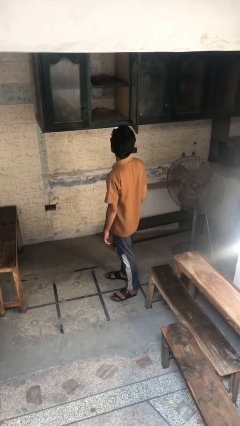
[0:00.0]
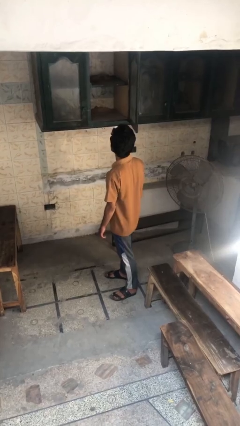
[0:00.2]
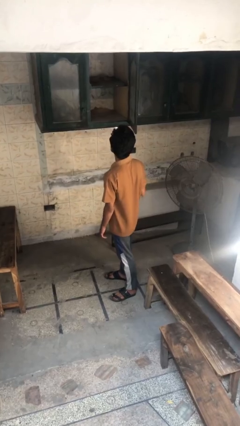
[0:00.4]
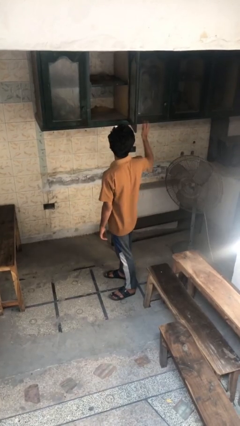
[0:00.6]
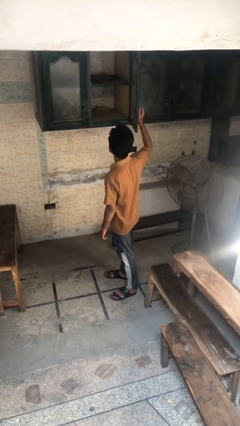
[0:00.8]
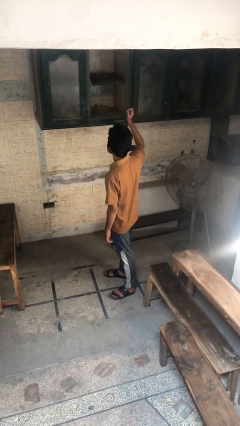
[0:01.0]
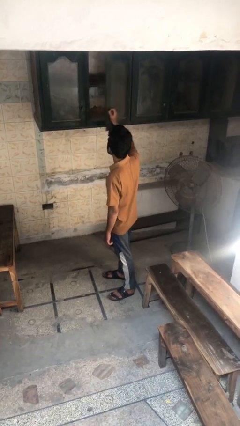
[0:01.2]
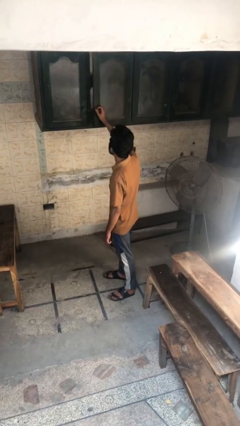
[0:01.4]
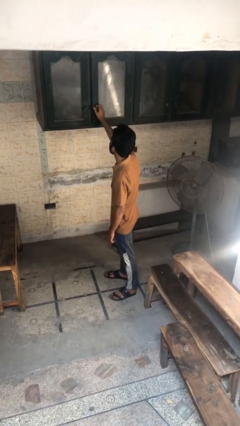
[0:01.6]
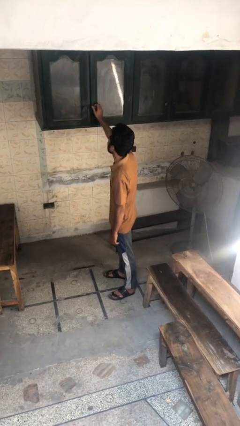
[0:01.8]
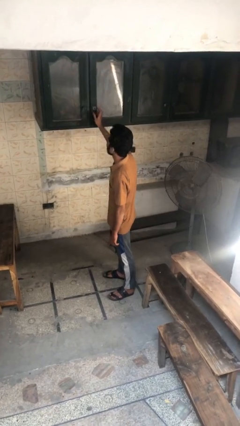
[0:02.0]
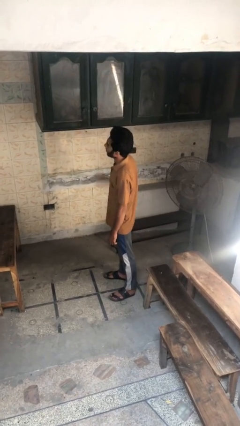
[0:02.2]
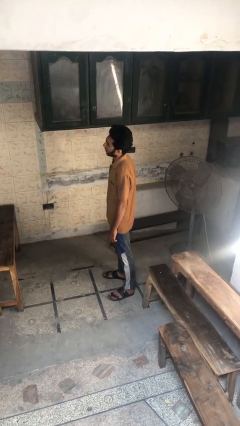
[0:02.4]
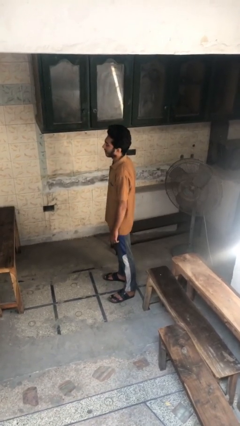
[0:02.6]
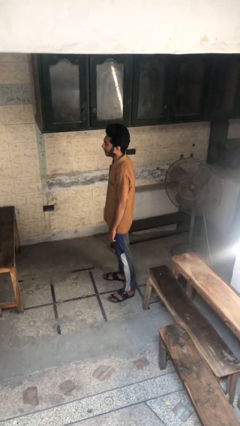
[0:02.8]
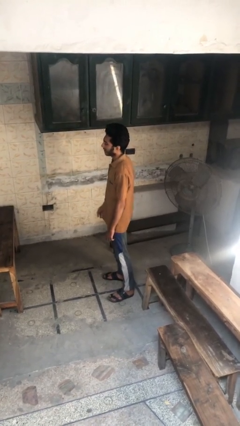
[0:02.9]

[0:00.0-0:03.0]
person closes cabinet

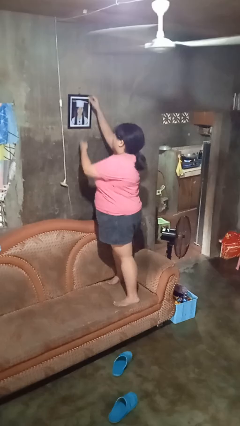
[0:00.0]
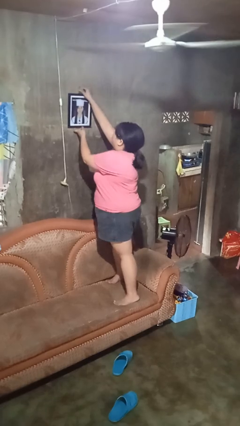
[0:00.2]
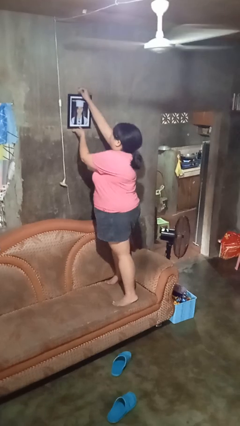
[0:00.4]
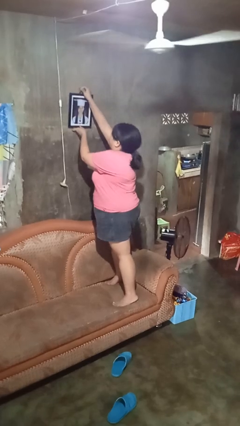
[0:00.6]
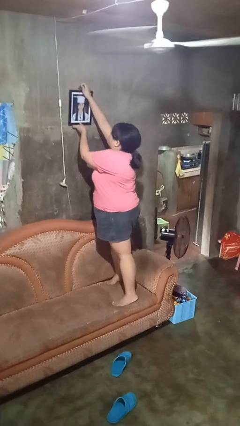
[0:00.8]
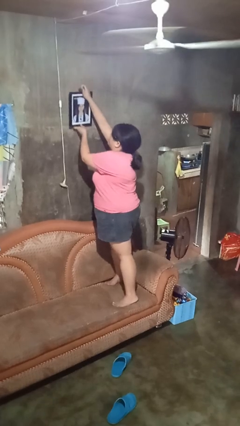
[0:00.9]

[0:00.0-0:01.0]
person takes down picture frame

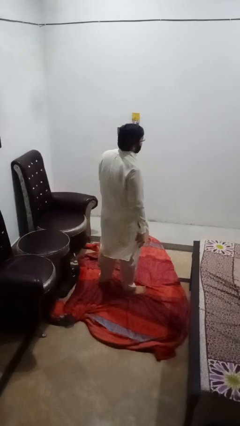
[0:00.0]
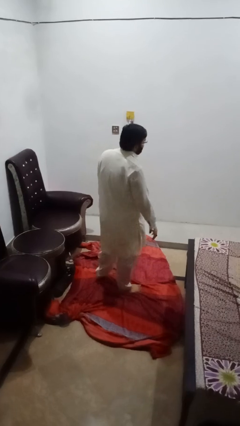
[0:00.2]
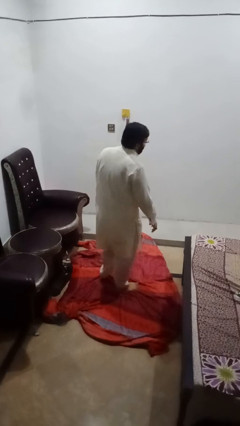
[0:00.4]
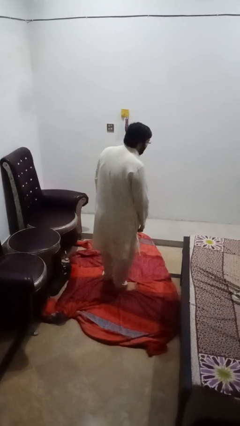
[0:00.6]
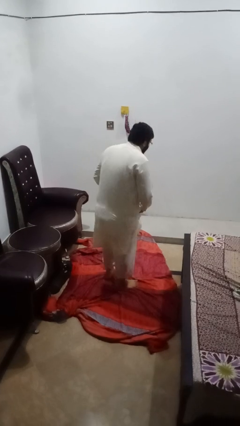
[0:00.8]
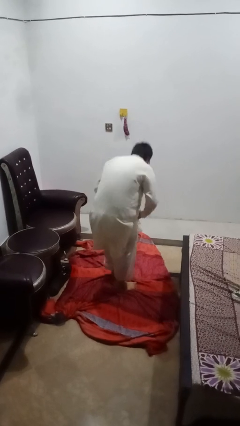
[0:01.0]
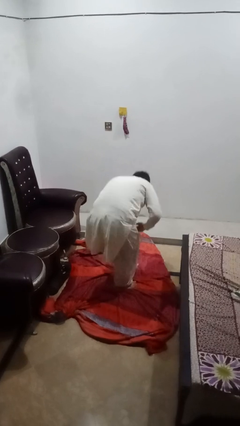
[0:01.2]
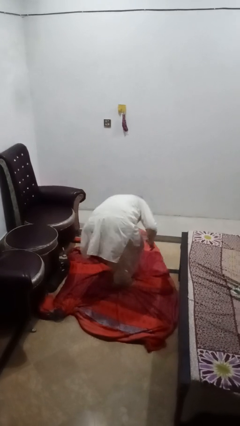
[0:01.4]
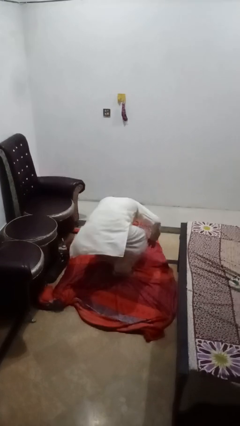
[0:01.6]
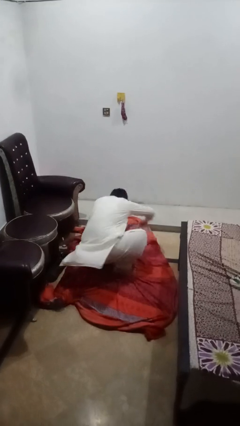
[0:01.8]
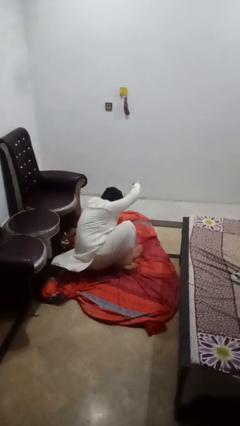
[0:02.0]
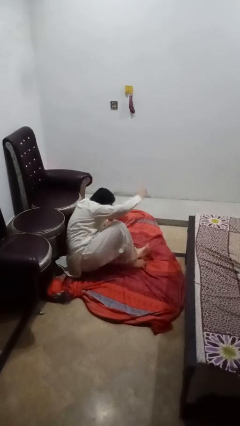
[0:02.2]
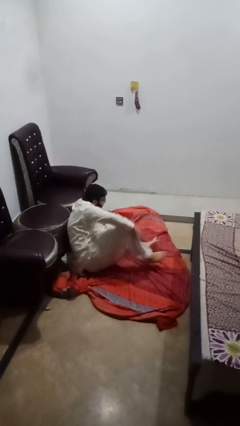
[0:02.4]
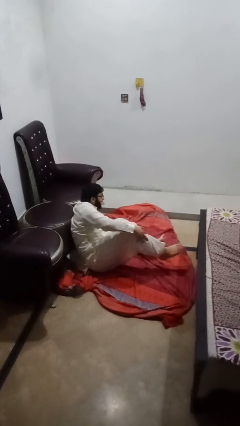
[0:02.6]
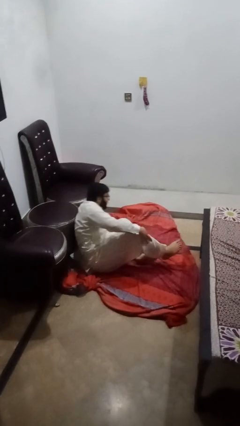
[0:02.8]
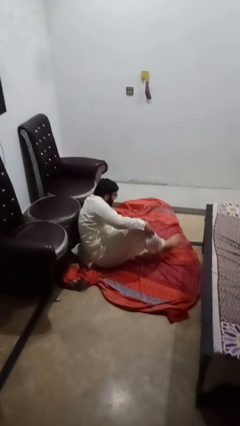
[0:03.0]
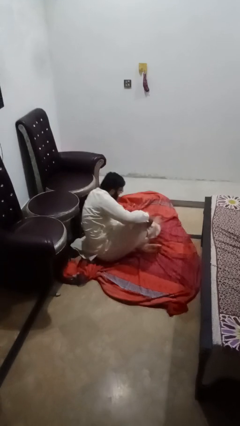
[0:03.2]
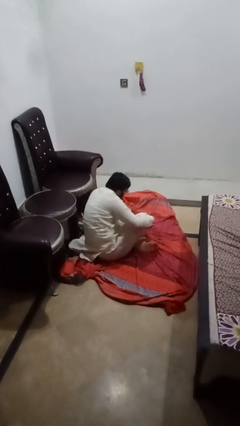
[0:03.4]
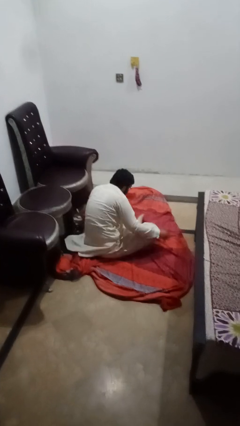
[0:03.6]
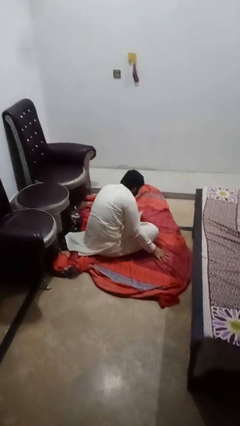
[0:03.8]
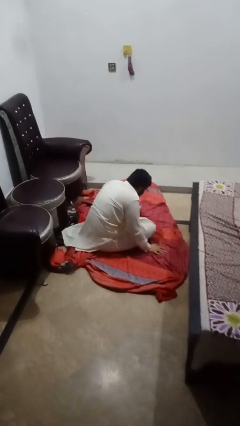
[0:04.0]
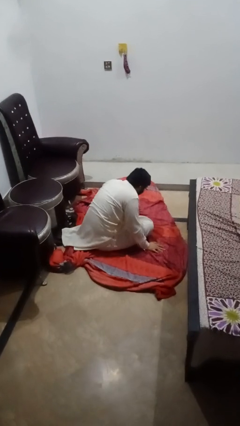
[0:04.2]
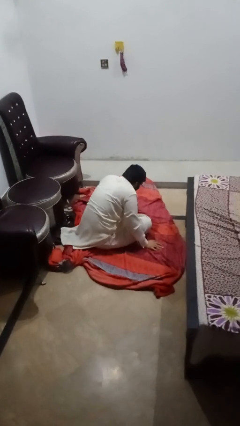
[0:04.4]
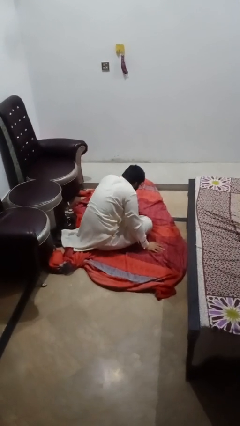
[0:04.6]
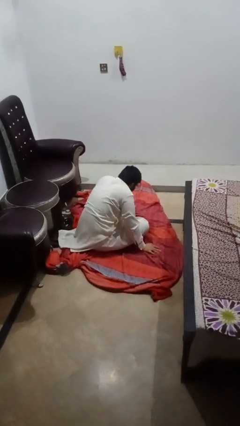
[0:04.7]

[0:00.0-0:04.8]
person sits crisscross

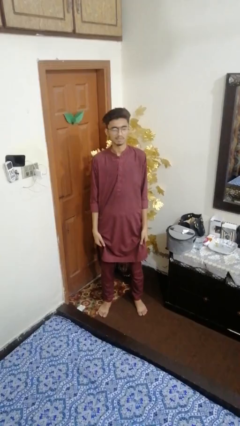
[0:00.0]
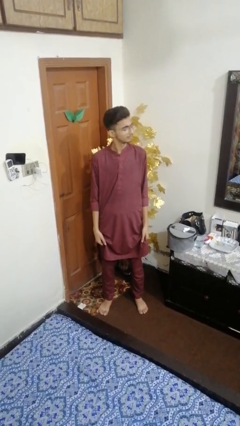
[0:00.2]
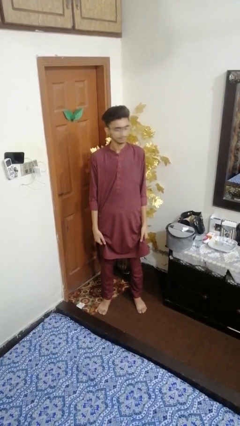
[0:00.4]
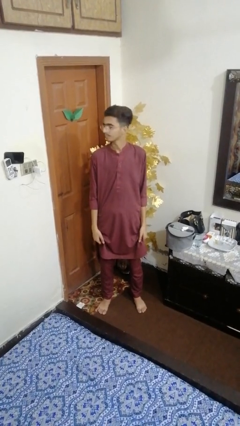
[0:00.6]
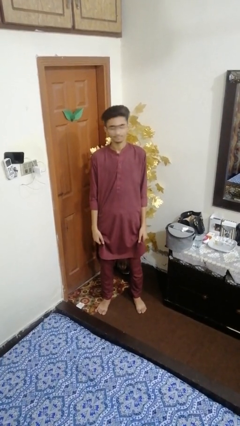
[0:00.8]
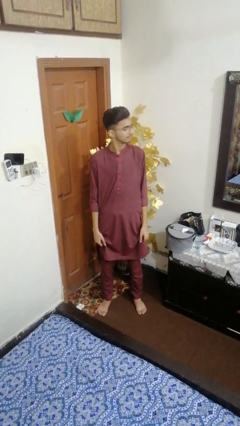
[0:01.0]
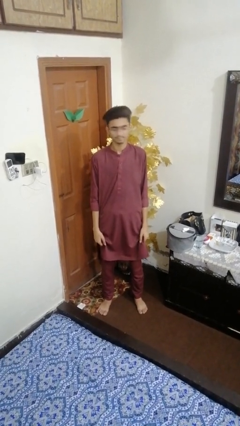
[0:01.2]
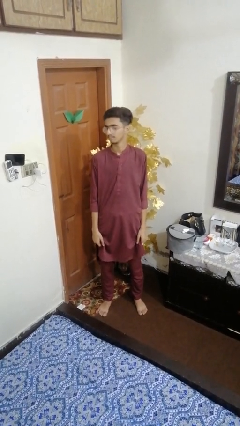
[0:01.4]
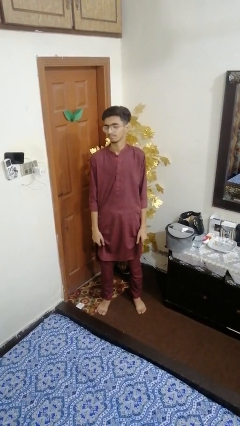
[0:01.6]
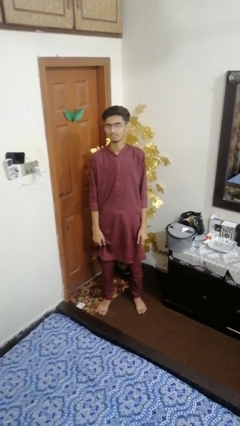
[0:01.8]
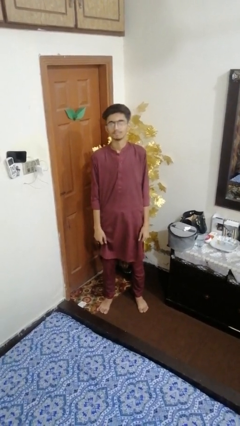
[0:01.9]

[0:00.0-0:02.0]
person shakes head

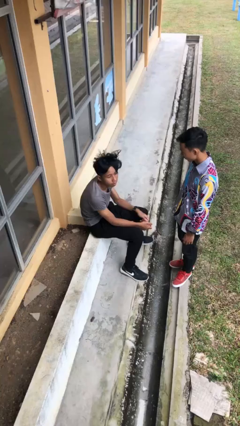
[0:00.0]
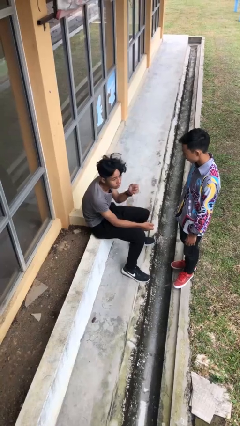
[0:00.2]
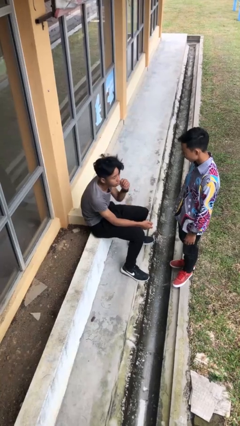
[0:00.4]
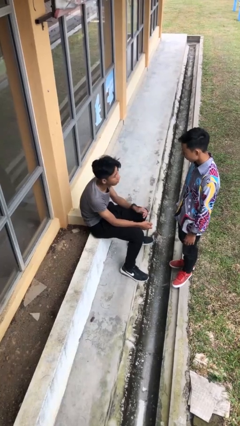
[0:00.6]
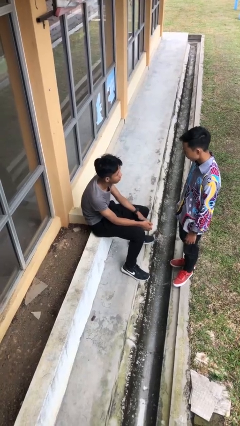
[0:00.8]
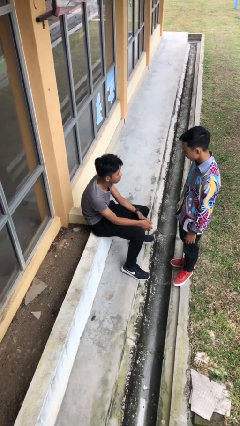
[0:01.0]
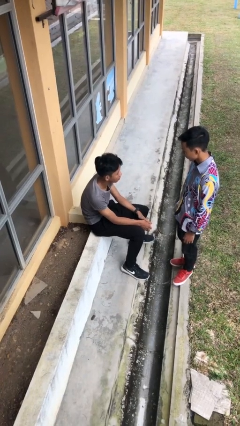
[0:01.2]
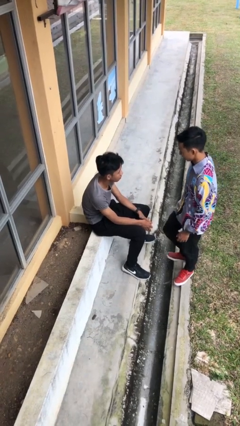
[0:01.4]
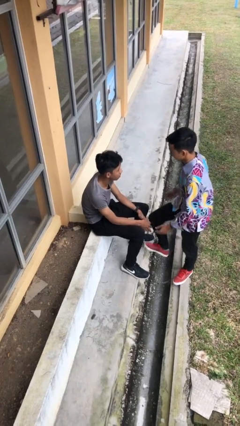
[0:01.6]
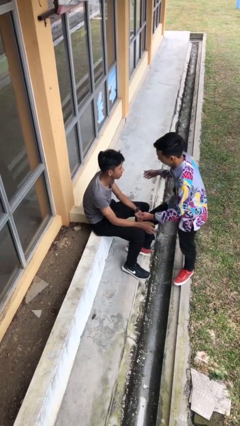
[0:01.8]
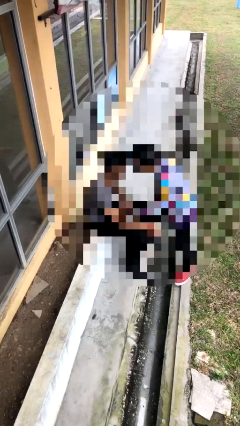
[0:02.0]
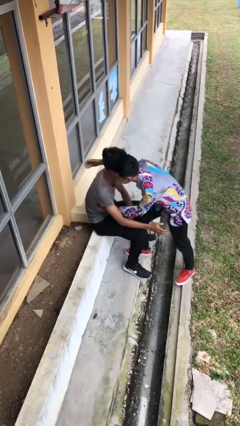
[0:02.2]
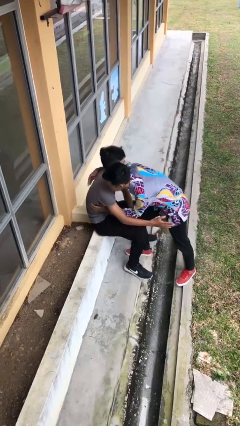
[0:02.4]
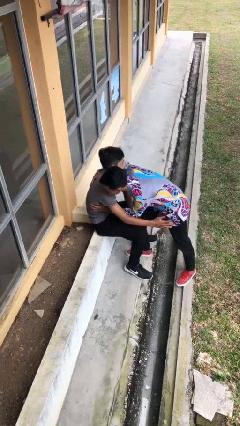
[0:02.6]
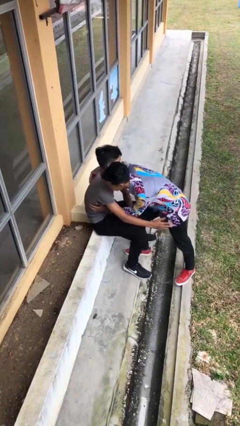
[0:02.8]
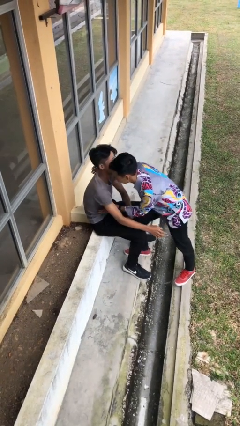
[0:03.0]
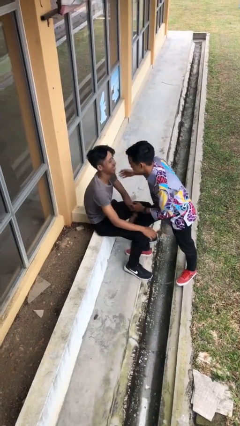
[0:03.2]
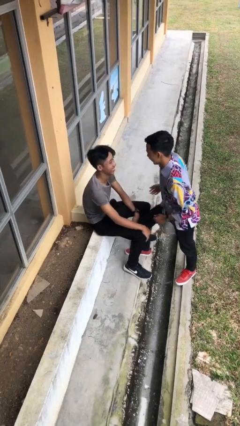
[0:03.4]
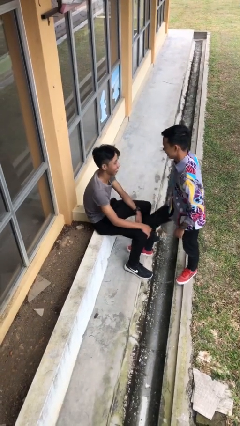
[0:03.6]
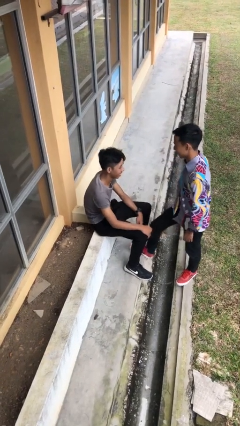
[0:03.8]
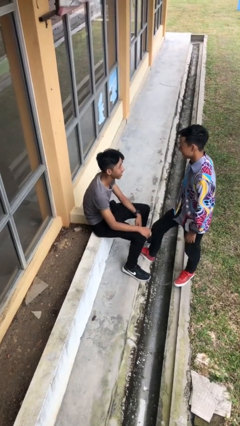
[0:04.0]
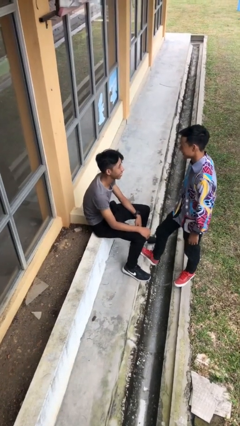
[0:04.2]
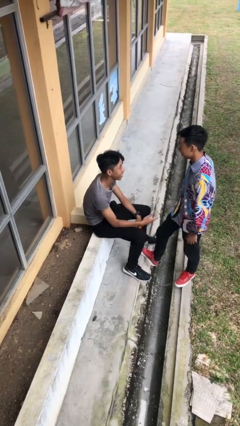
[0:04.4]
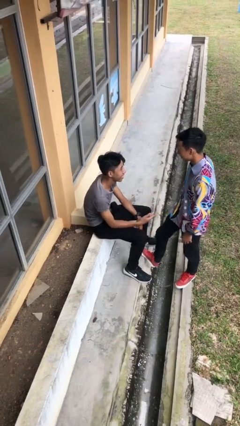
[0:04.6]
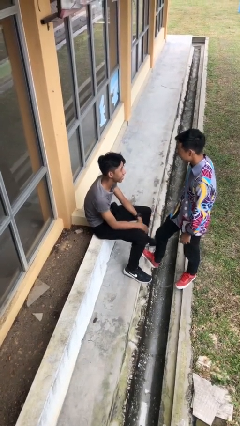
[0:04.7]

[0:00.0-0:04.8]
person embraces person

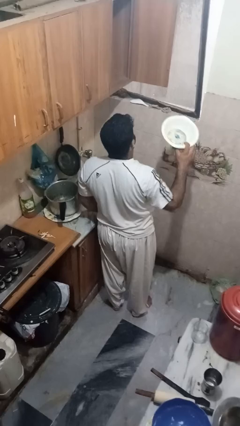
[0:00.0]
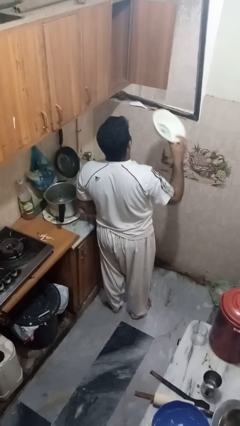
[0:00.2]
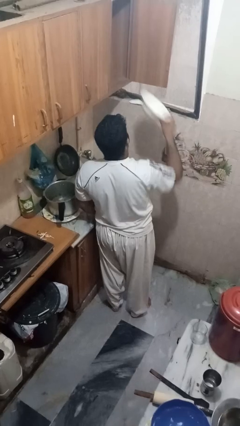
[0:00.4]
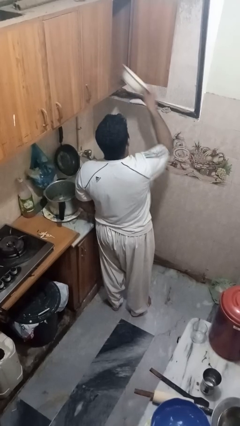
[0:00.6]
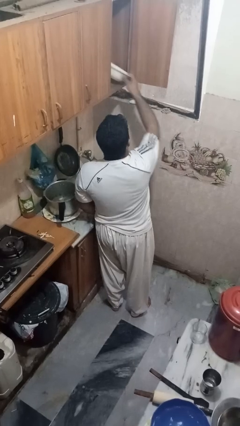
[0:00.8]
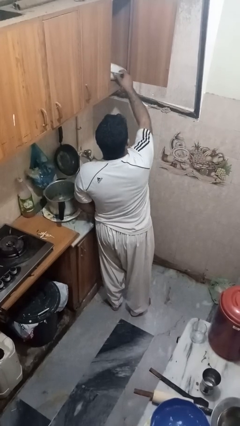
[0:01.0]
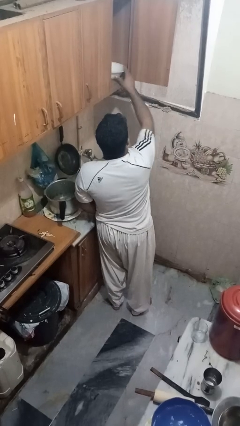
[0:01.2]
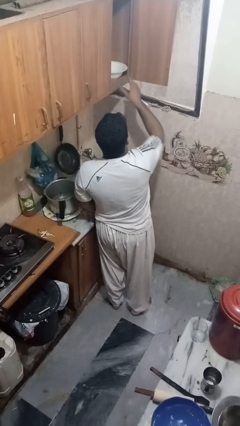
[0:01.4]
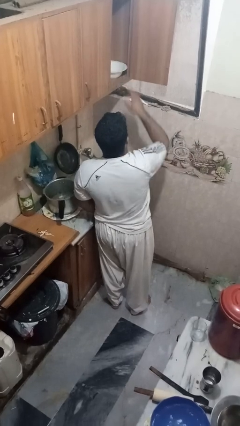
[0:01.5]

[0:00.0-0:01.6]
person puts object in cabinet

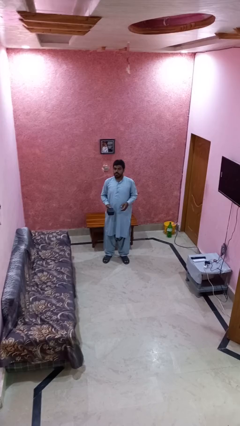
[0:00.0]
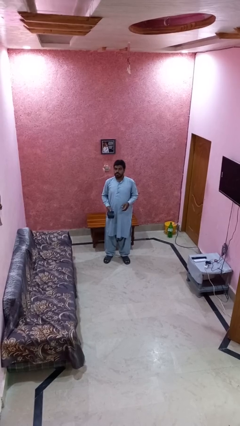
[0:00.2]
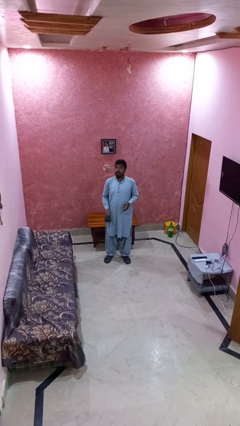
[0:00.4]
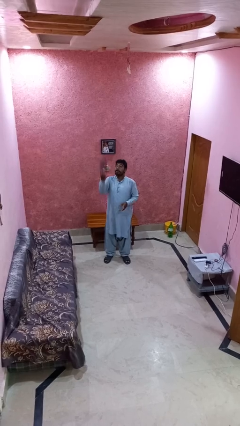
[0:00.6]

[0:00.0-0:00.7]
person drops object
